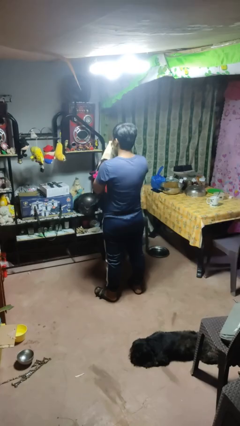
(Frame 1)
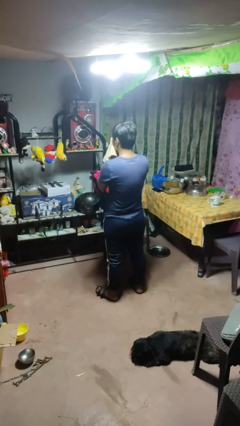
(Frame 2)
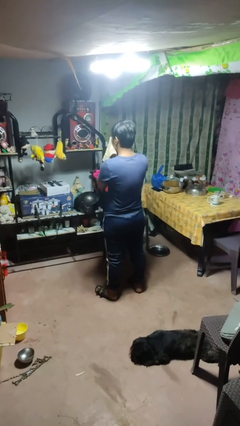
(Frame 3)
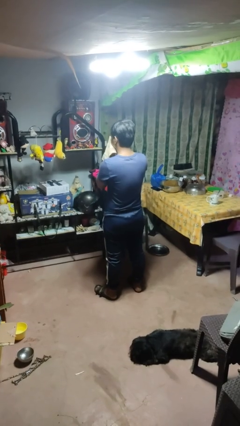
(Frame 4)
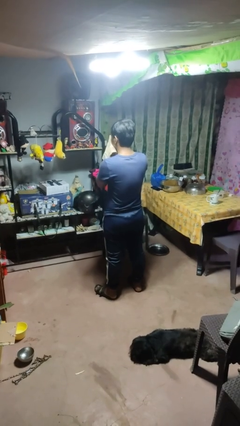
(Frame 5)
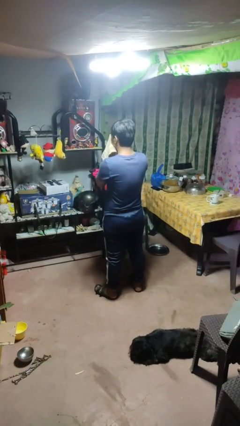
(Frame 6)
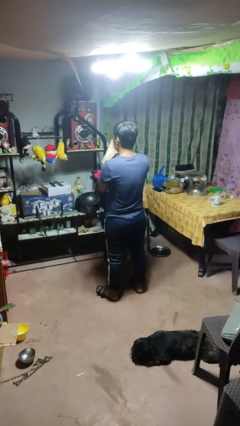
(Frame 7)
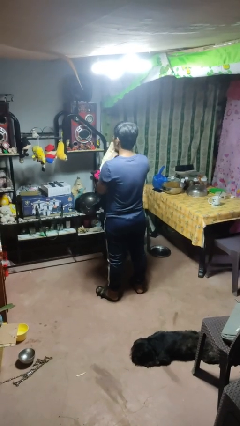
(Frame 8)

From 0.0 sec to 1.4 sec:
person blows nose

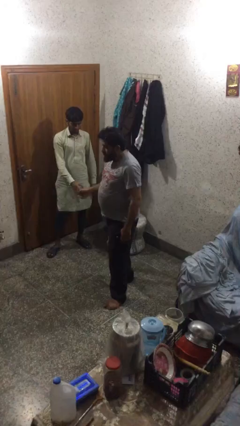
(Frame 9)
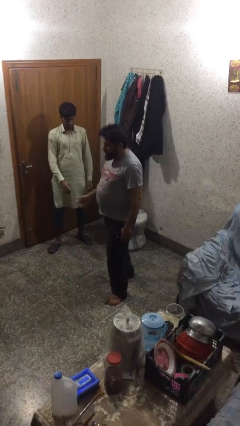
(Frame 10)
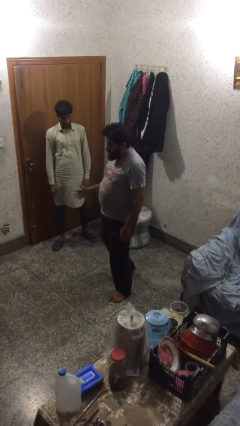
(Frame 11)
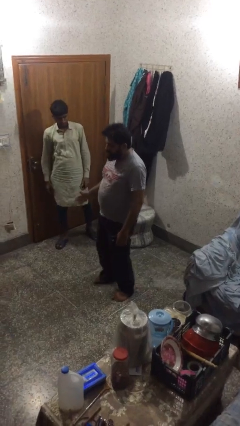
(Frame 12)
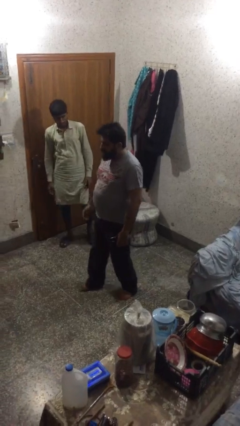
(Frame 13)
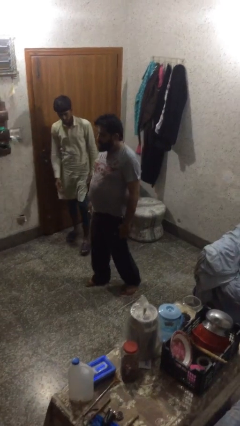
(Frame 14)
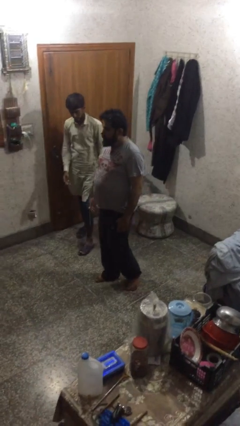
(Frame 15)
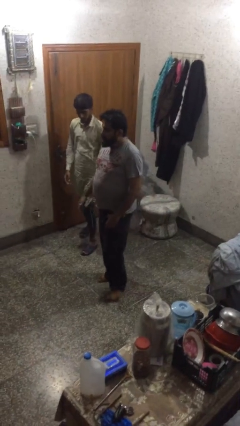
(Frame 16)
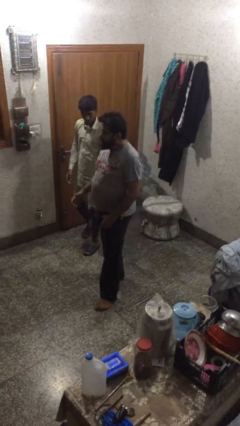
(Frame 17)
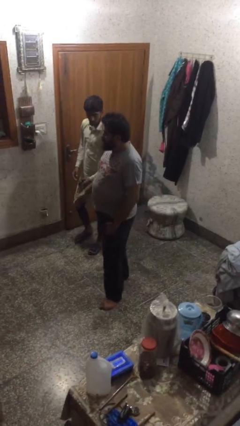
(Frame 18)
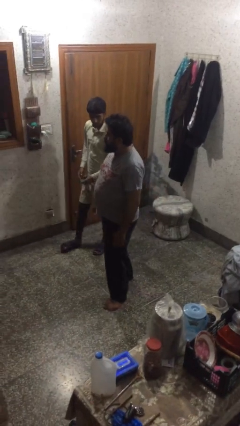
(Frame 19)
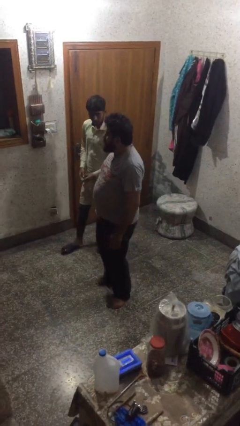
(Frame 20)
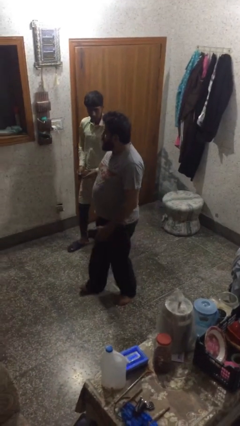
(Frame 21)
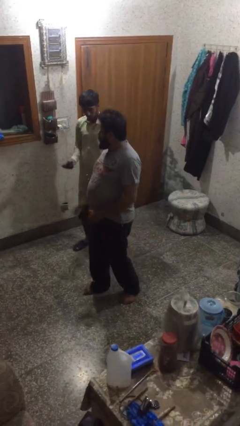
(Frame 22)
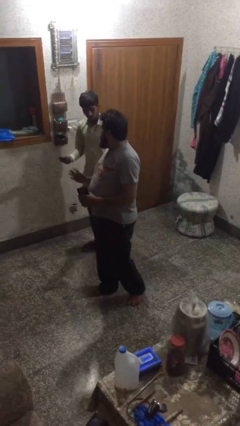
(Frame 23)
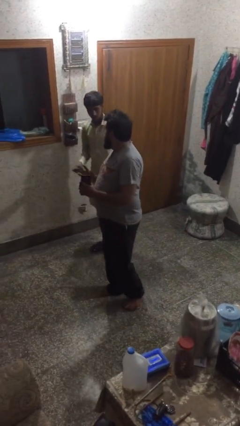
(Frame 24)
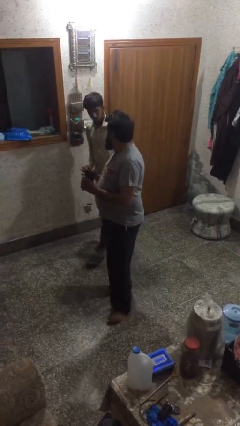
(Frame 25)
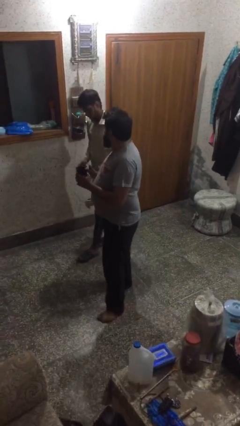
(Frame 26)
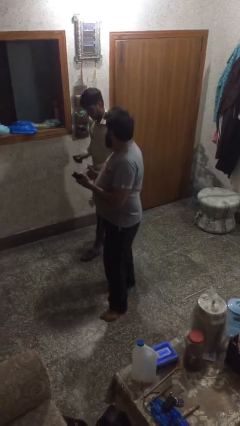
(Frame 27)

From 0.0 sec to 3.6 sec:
person talks to person

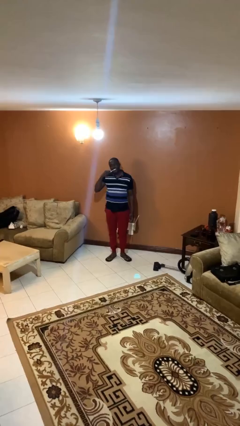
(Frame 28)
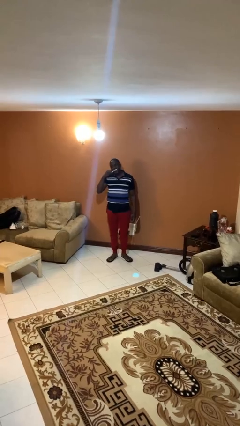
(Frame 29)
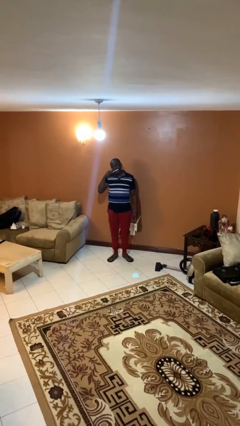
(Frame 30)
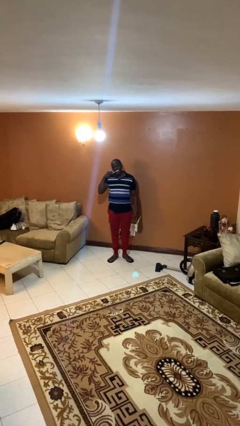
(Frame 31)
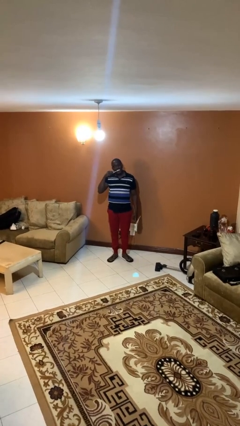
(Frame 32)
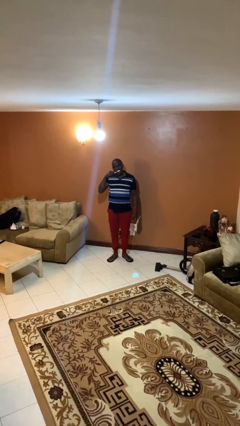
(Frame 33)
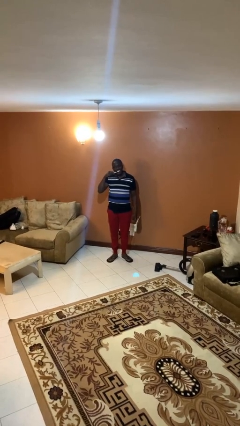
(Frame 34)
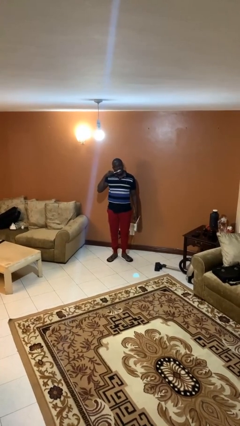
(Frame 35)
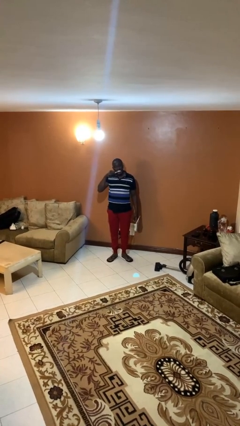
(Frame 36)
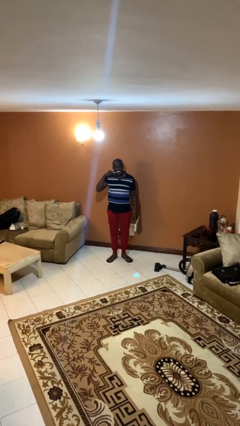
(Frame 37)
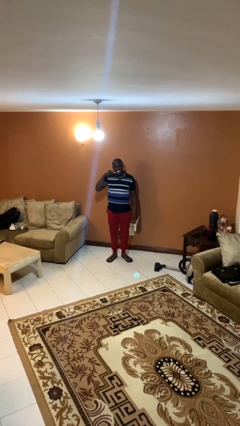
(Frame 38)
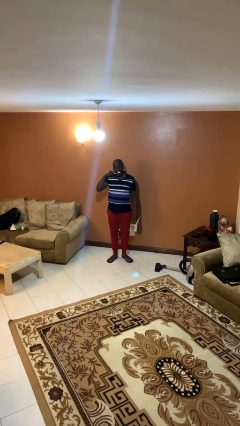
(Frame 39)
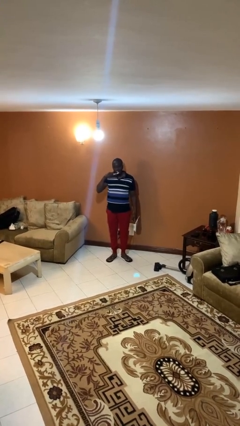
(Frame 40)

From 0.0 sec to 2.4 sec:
person brushes teeth

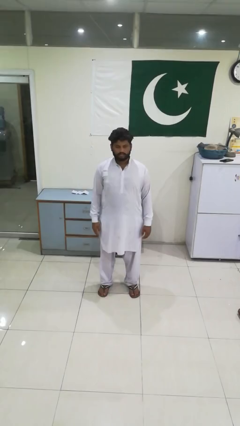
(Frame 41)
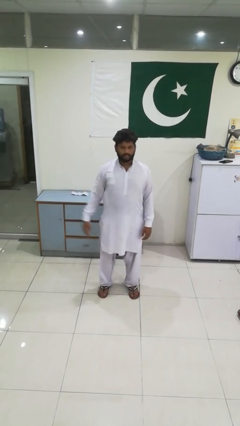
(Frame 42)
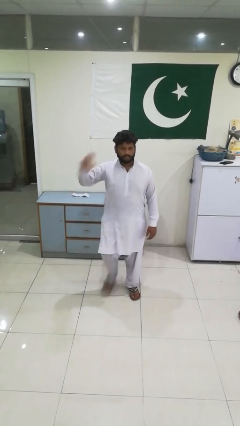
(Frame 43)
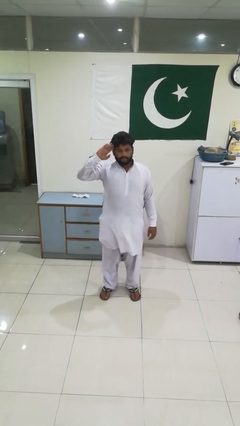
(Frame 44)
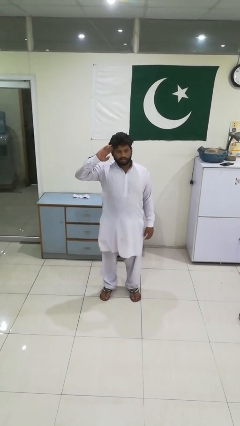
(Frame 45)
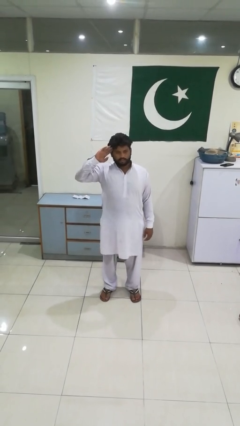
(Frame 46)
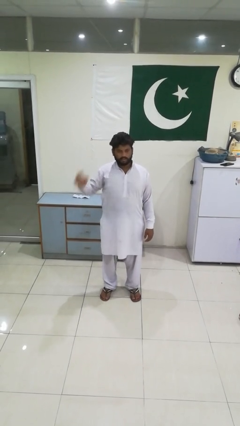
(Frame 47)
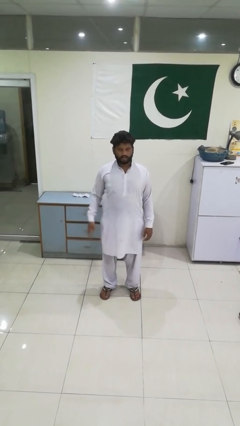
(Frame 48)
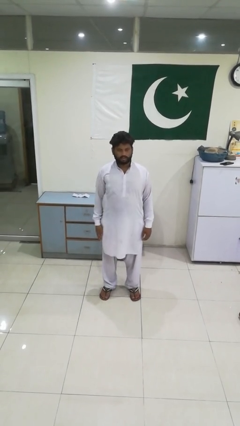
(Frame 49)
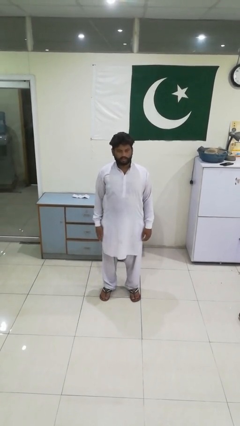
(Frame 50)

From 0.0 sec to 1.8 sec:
person salutes

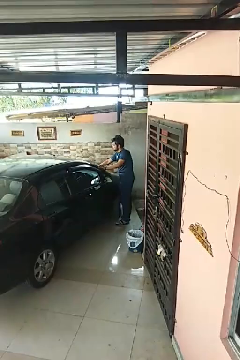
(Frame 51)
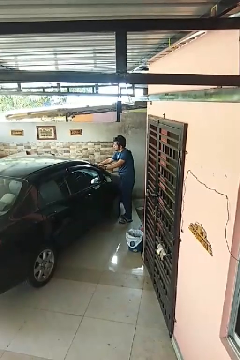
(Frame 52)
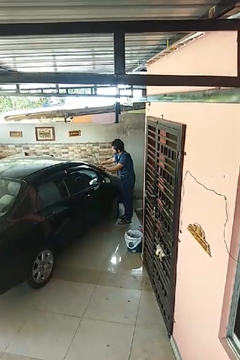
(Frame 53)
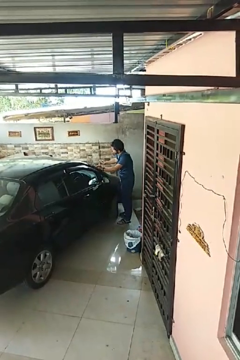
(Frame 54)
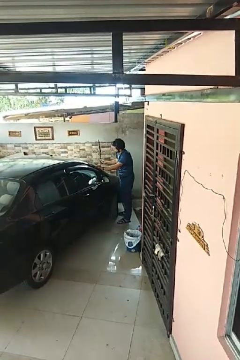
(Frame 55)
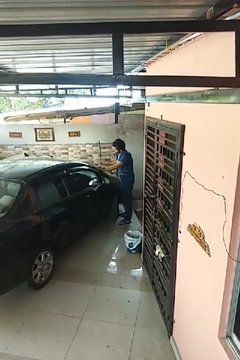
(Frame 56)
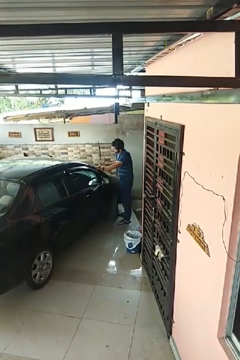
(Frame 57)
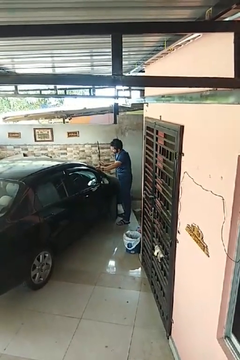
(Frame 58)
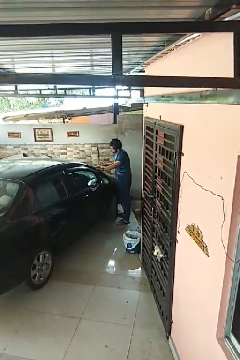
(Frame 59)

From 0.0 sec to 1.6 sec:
person flips up car wipers

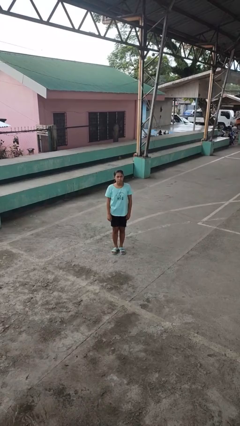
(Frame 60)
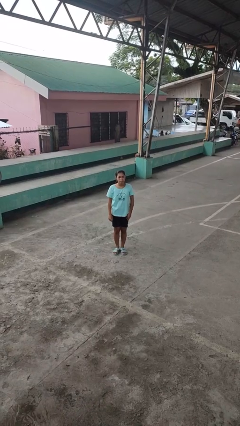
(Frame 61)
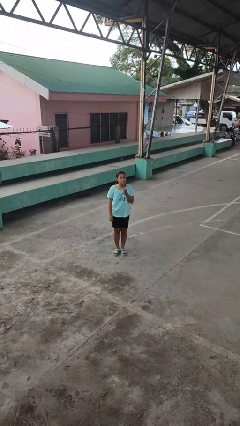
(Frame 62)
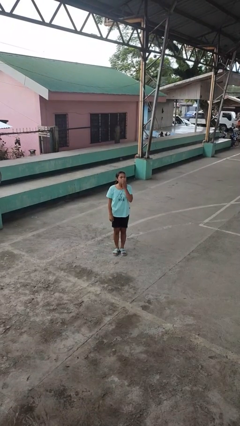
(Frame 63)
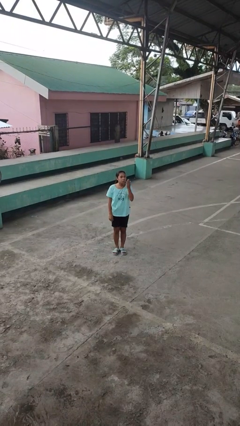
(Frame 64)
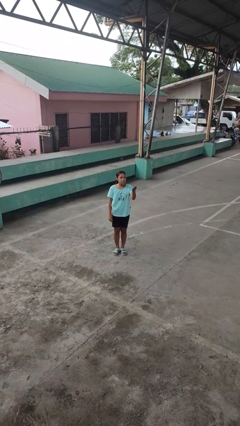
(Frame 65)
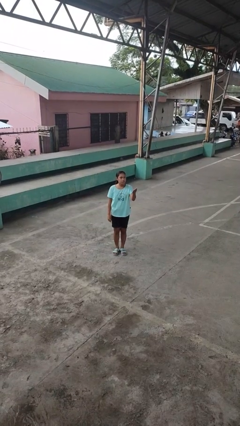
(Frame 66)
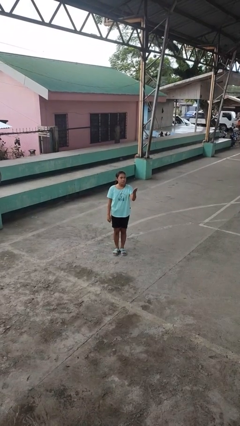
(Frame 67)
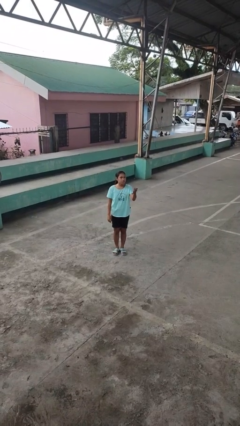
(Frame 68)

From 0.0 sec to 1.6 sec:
person gestures blow kiss

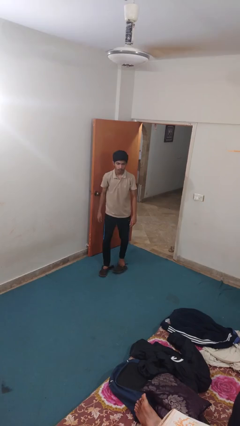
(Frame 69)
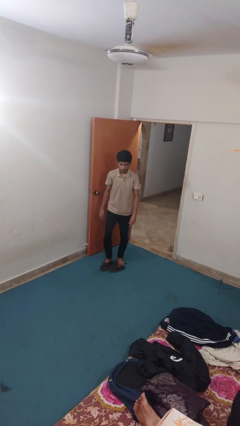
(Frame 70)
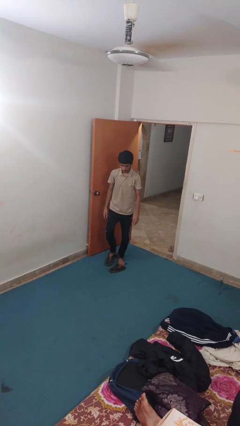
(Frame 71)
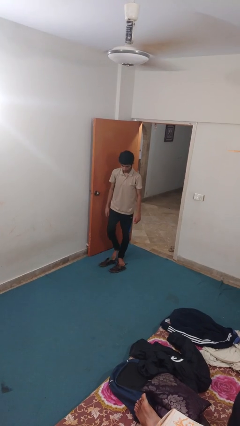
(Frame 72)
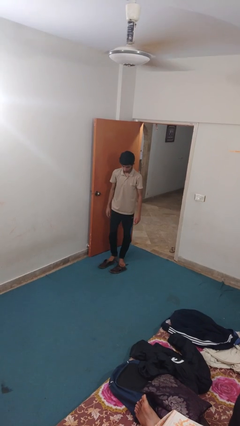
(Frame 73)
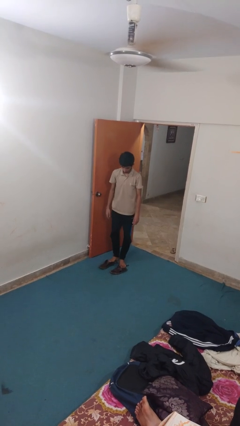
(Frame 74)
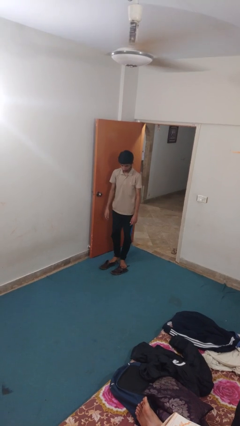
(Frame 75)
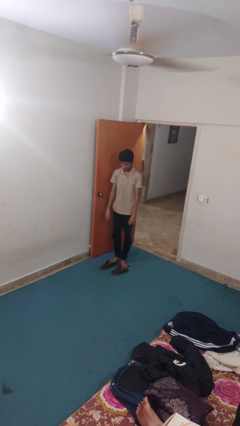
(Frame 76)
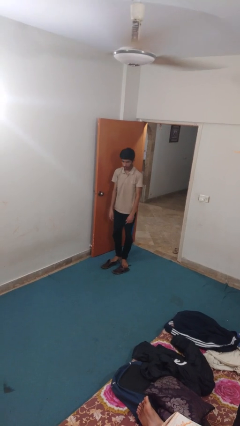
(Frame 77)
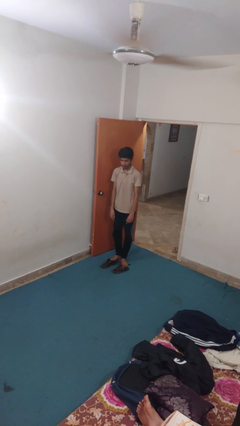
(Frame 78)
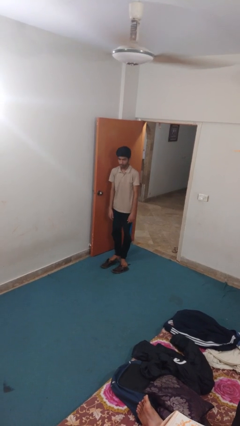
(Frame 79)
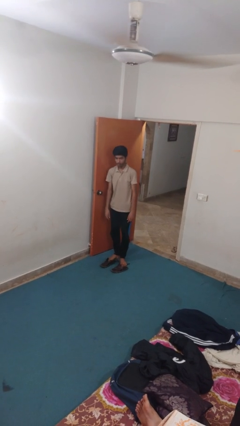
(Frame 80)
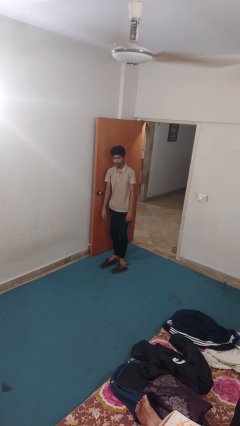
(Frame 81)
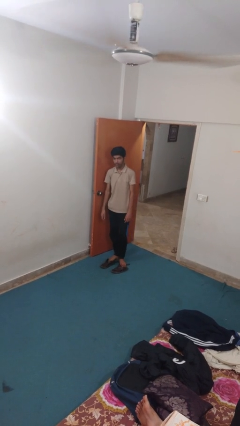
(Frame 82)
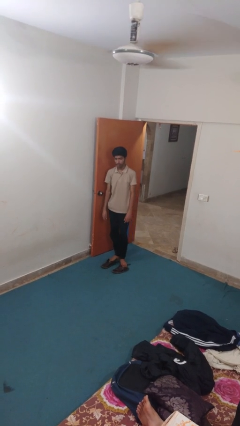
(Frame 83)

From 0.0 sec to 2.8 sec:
person takes off shoes

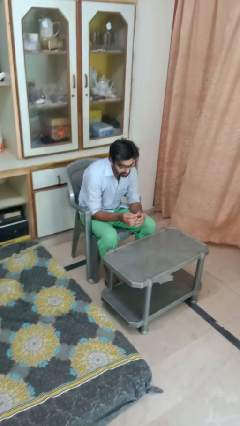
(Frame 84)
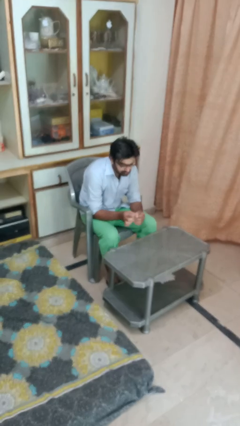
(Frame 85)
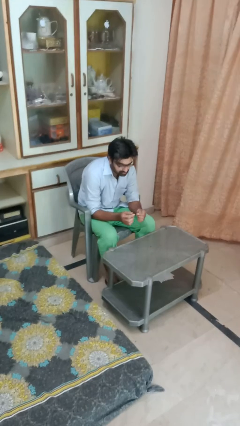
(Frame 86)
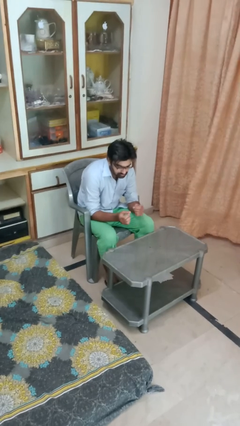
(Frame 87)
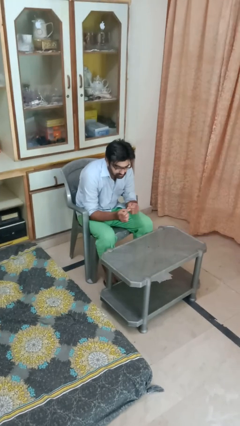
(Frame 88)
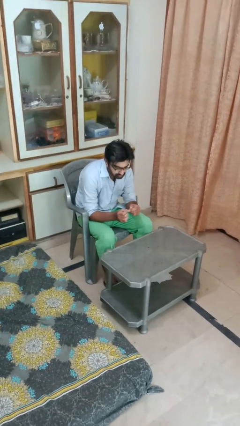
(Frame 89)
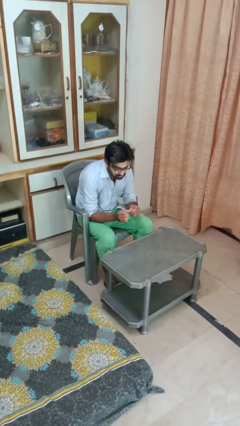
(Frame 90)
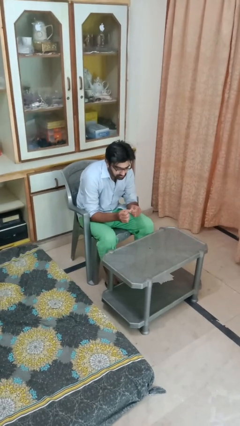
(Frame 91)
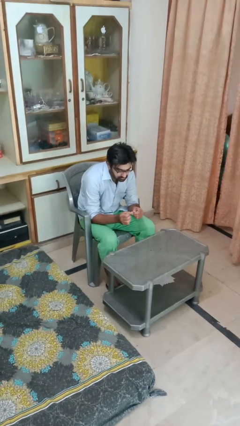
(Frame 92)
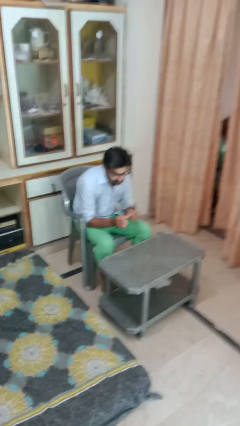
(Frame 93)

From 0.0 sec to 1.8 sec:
person files fingernails

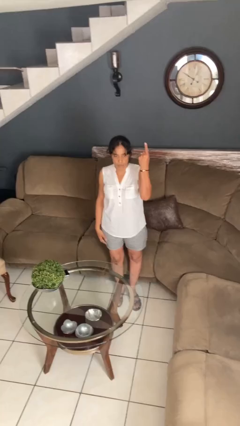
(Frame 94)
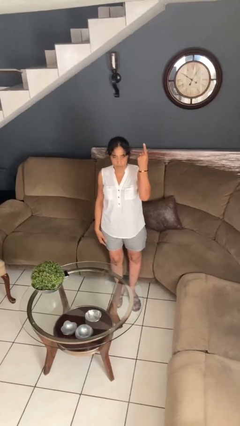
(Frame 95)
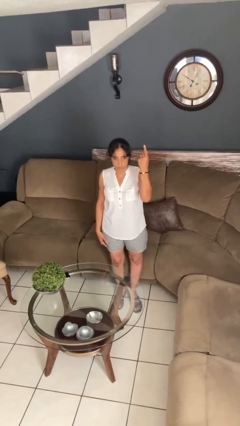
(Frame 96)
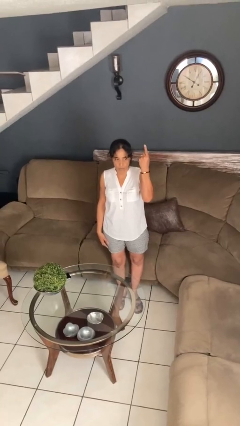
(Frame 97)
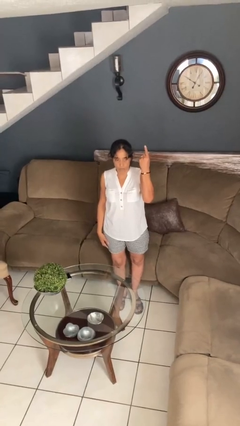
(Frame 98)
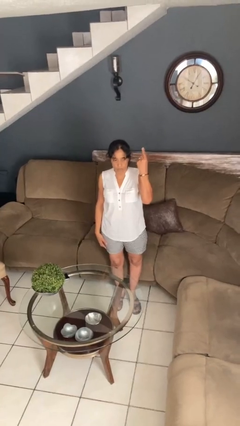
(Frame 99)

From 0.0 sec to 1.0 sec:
person gestures number one
